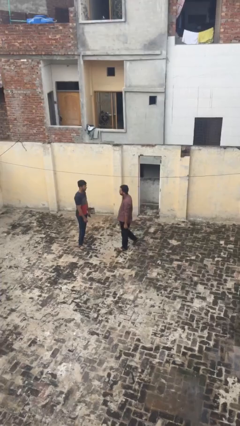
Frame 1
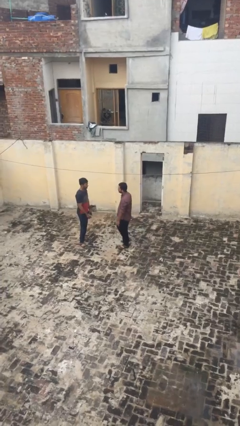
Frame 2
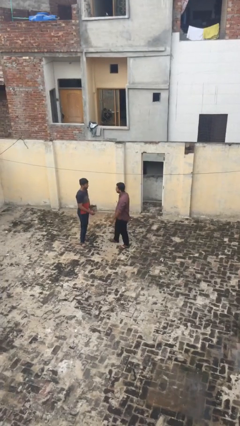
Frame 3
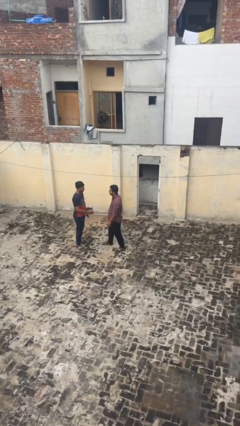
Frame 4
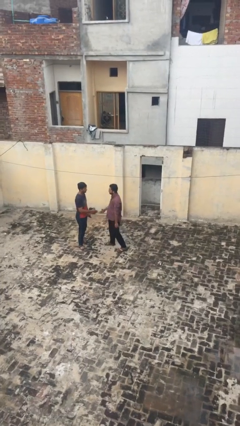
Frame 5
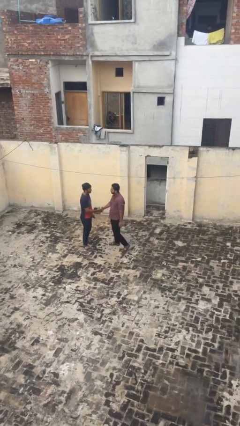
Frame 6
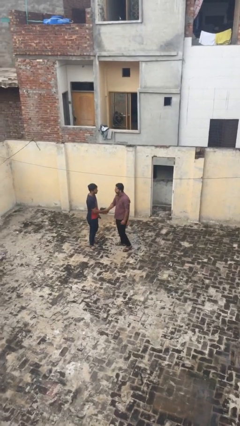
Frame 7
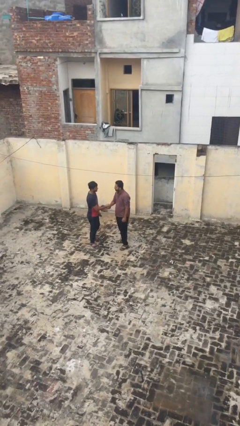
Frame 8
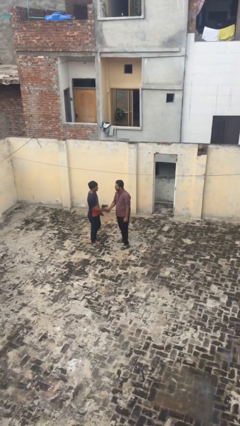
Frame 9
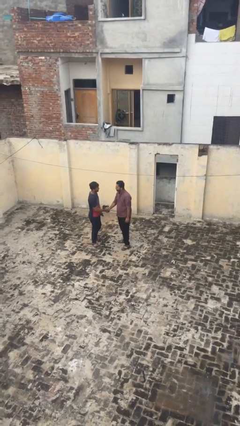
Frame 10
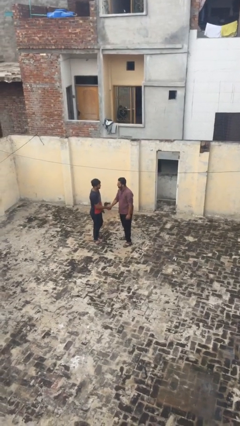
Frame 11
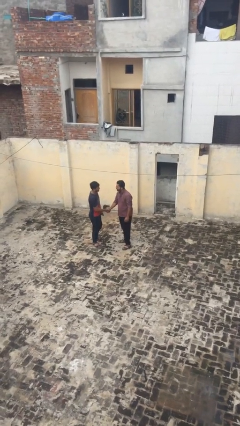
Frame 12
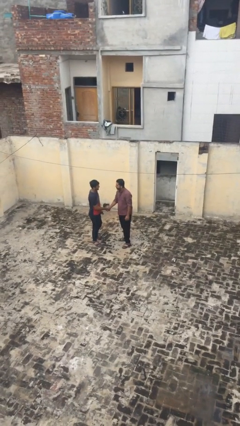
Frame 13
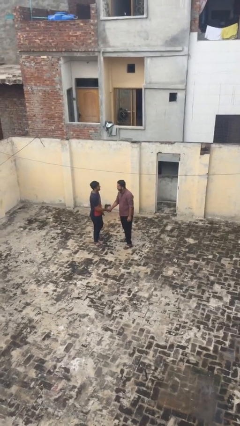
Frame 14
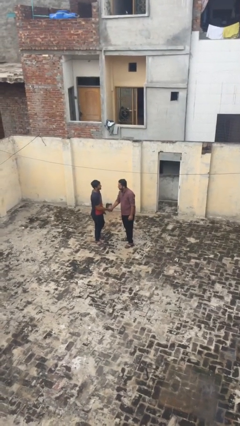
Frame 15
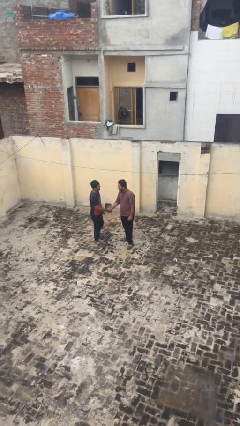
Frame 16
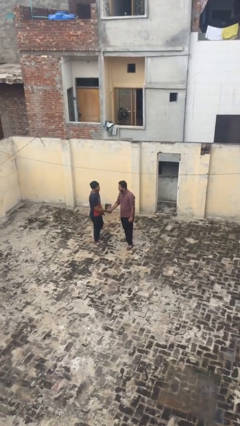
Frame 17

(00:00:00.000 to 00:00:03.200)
person shakes hand

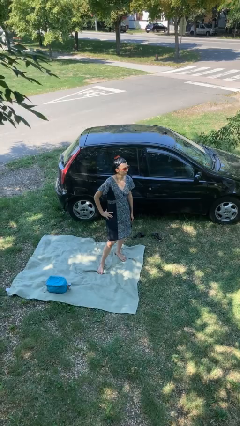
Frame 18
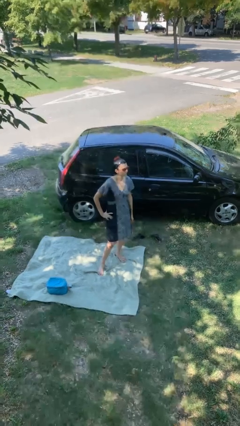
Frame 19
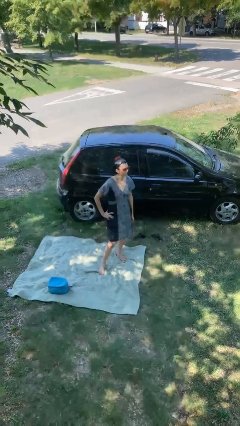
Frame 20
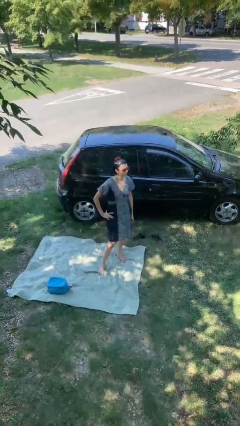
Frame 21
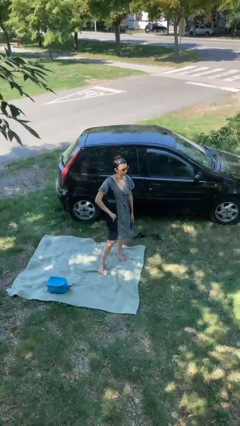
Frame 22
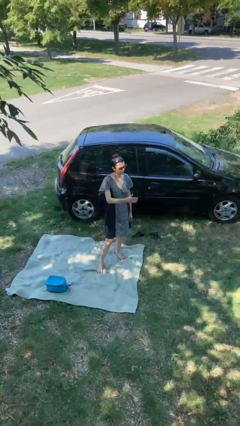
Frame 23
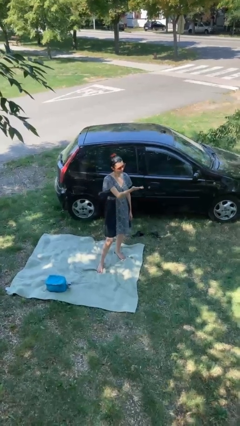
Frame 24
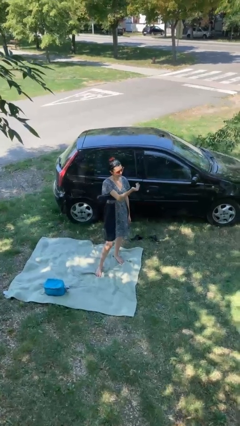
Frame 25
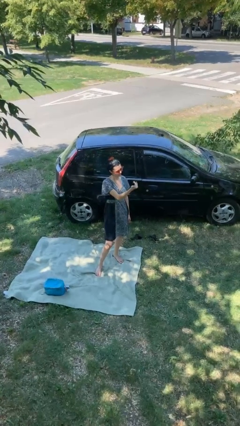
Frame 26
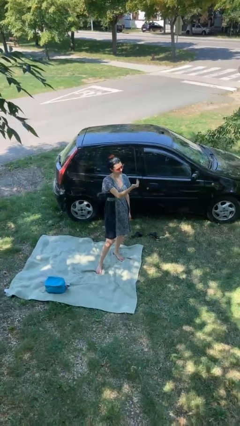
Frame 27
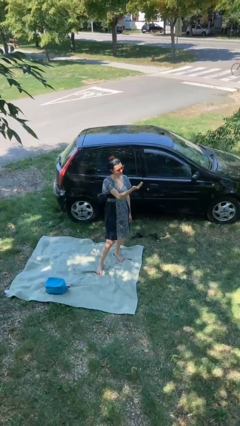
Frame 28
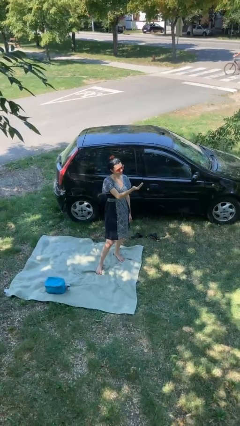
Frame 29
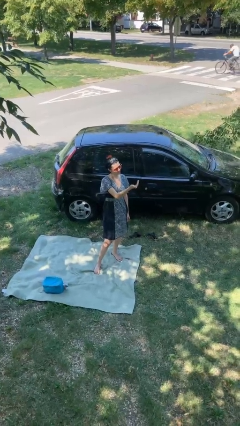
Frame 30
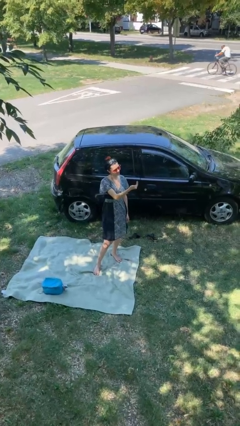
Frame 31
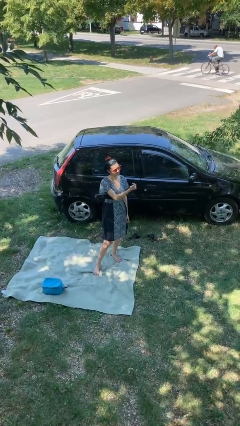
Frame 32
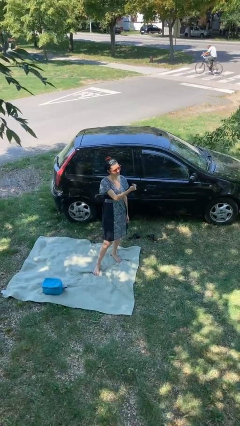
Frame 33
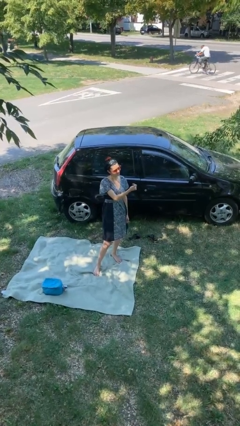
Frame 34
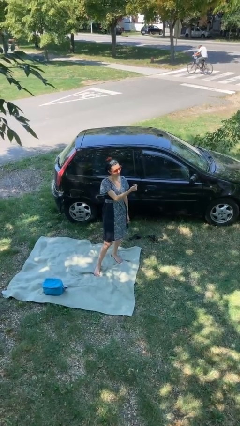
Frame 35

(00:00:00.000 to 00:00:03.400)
person gestures come here

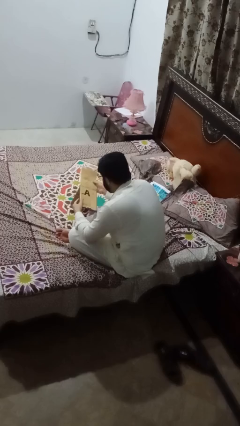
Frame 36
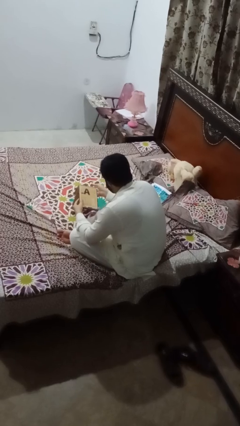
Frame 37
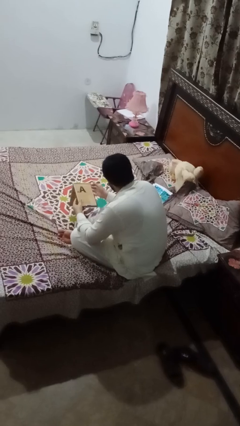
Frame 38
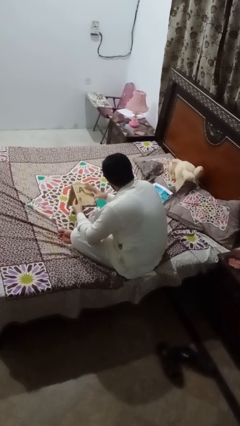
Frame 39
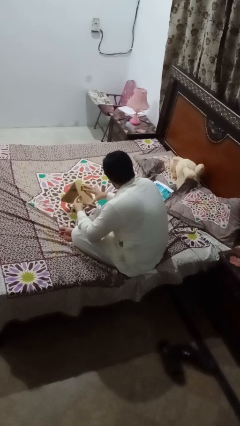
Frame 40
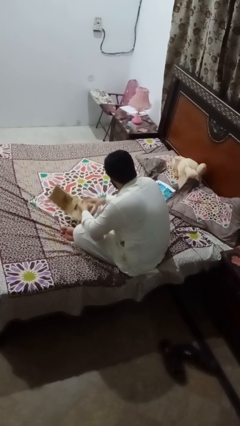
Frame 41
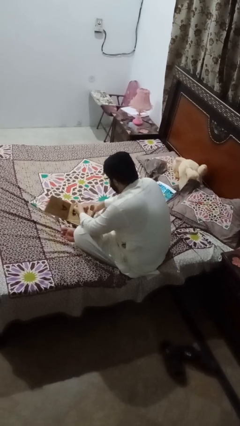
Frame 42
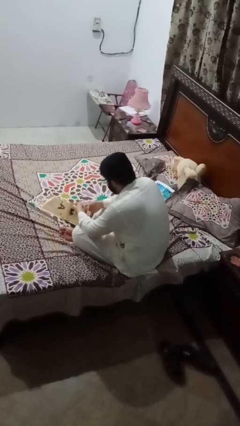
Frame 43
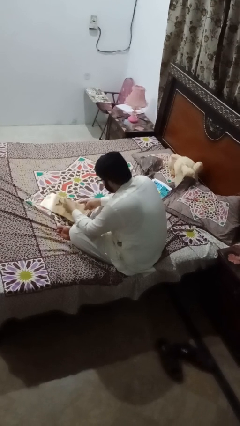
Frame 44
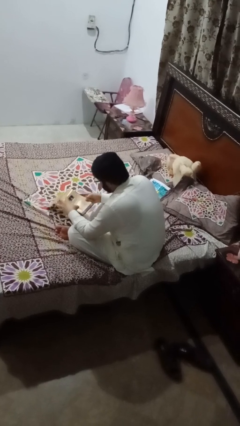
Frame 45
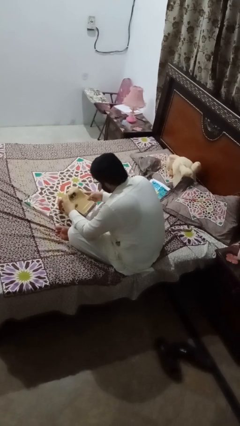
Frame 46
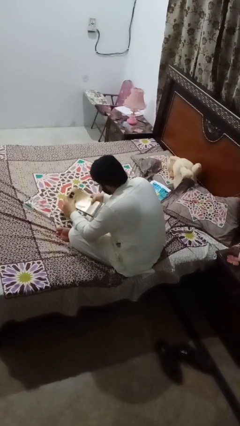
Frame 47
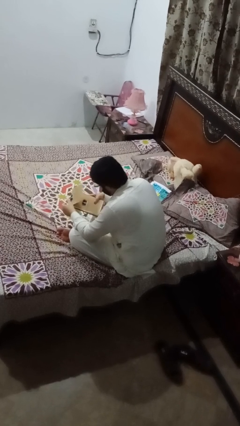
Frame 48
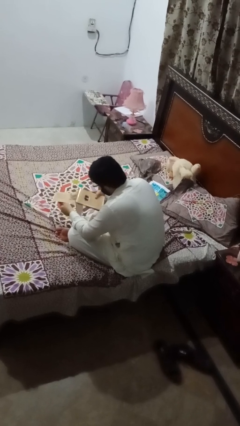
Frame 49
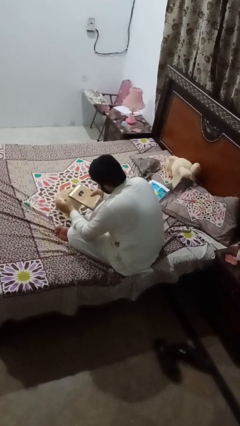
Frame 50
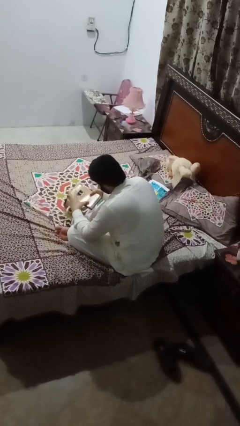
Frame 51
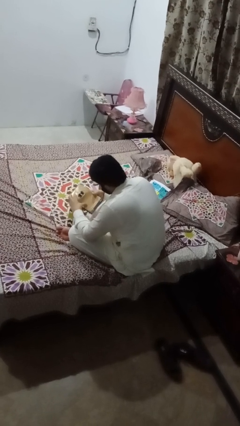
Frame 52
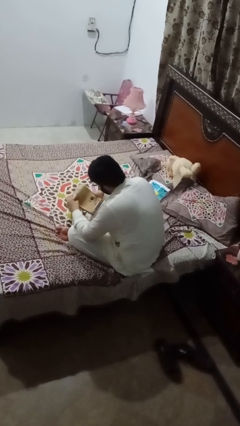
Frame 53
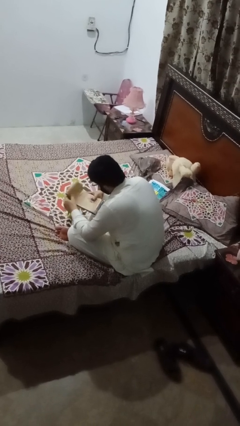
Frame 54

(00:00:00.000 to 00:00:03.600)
person reads magazine

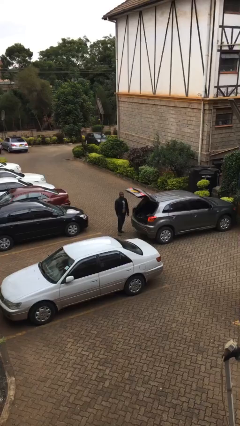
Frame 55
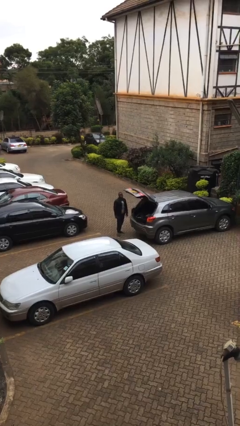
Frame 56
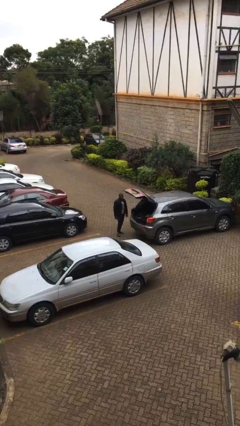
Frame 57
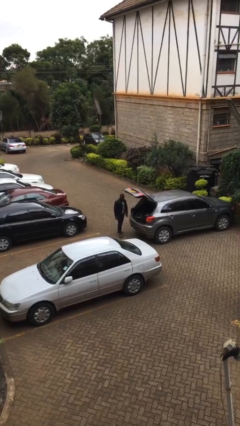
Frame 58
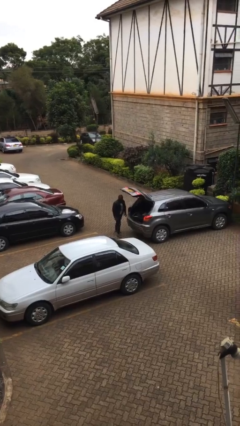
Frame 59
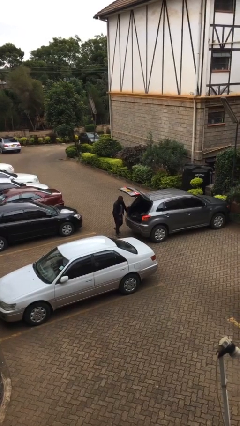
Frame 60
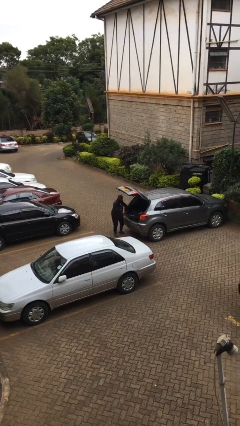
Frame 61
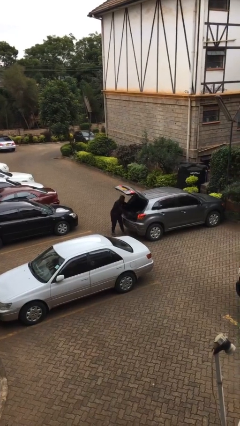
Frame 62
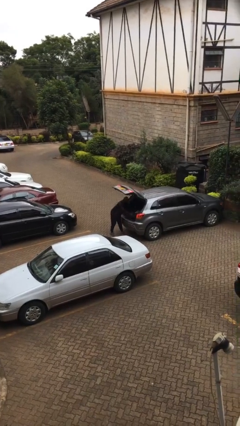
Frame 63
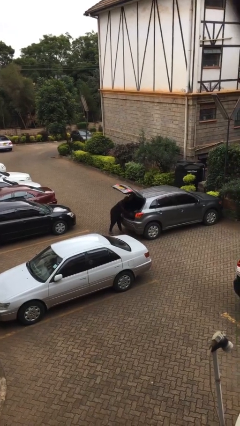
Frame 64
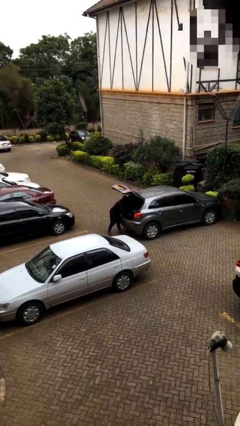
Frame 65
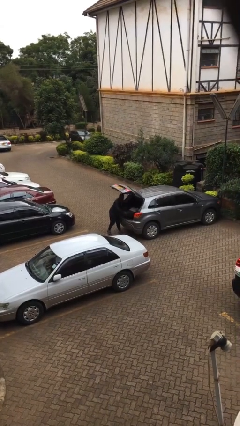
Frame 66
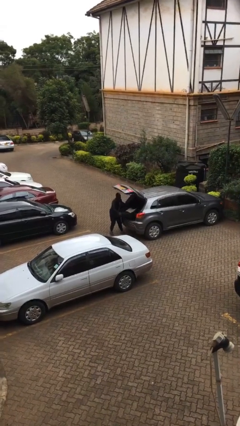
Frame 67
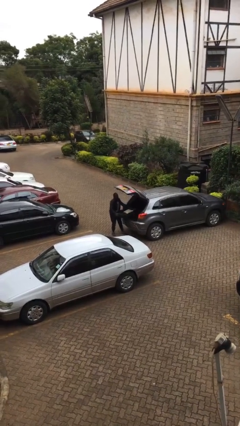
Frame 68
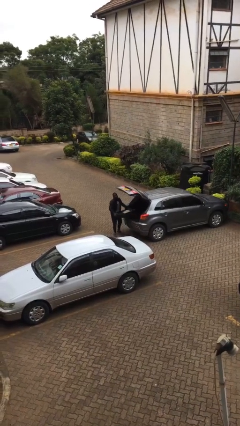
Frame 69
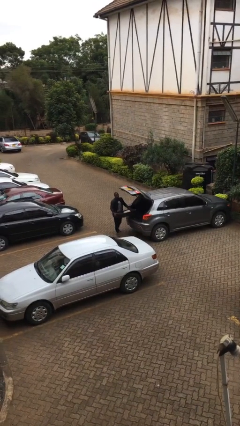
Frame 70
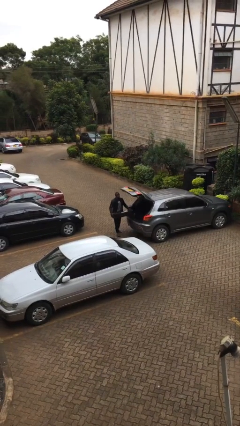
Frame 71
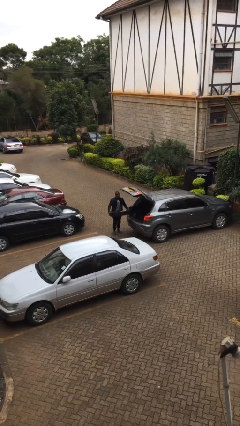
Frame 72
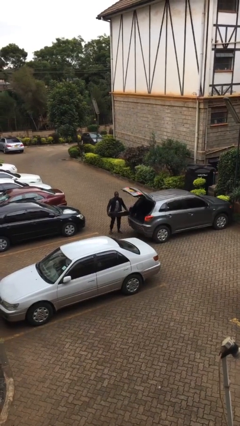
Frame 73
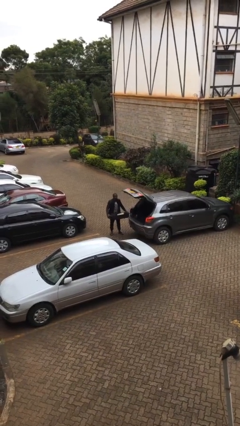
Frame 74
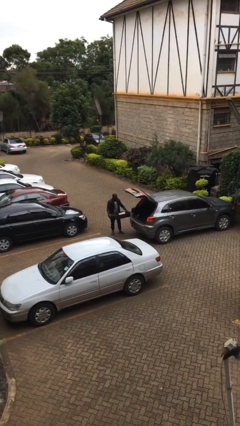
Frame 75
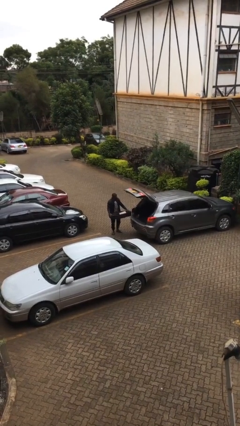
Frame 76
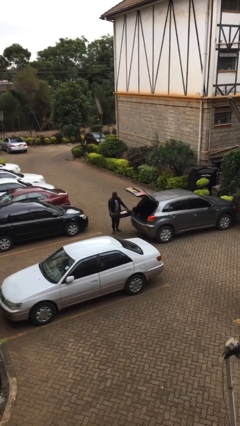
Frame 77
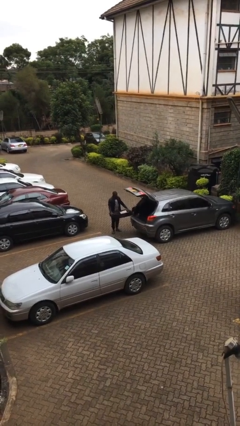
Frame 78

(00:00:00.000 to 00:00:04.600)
person unloads car

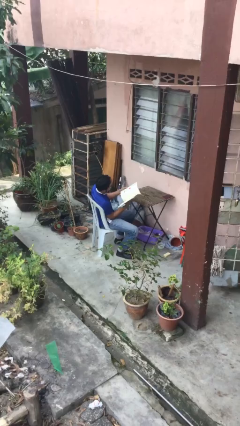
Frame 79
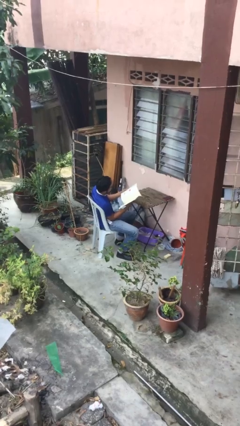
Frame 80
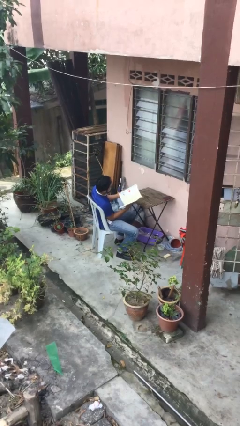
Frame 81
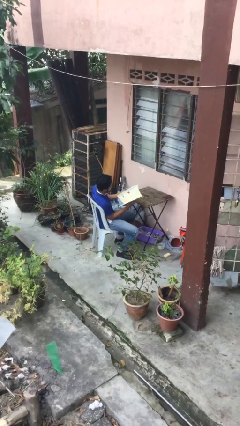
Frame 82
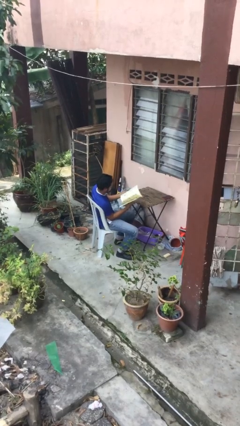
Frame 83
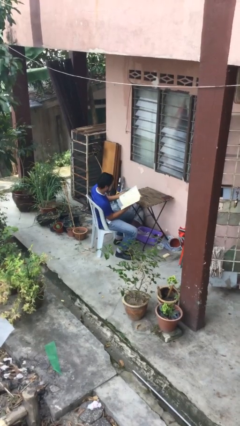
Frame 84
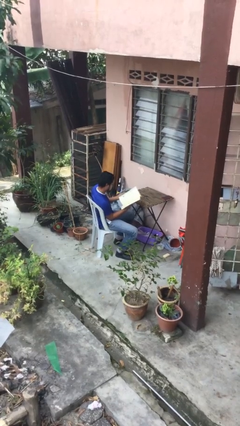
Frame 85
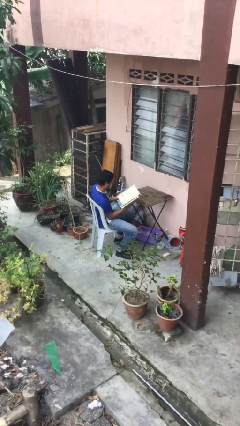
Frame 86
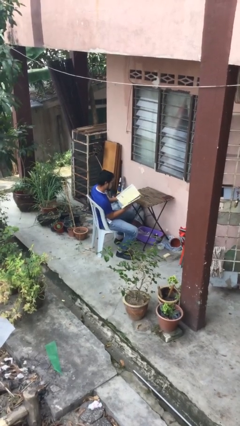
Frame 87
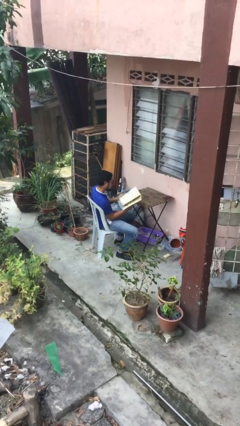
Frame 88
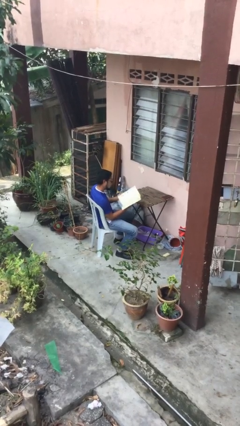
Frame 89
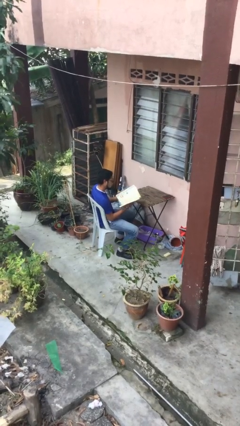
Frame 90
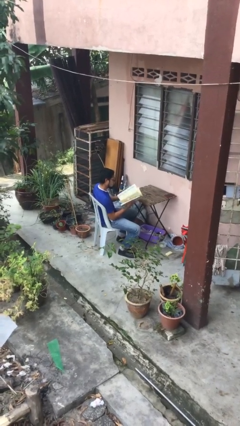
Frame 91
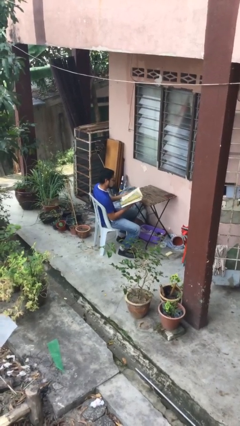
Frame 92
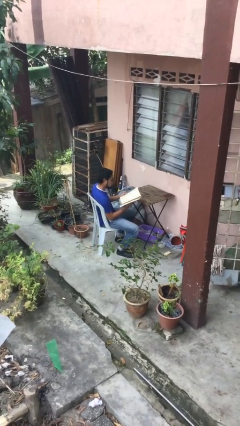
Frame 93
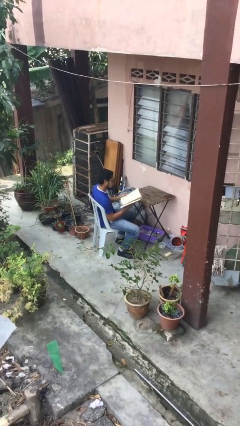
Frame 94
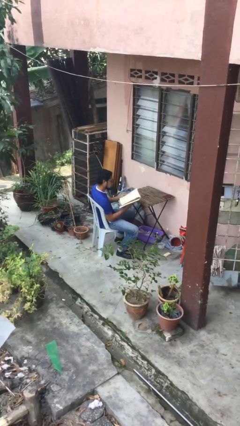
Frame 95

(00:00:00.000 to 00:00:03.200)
person reads document
